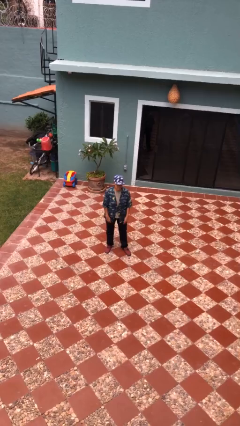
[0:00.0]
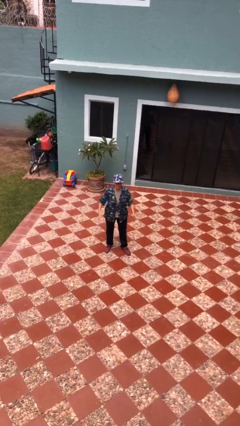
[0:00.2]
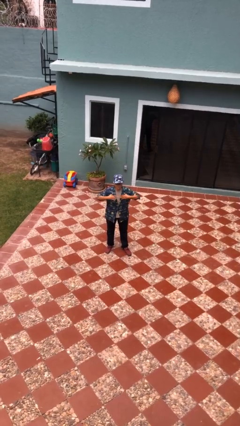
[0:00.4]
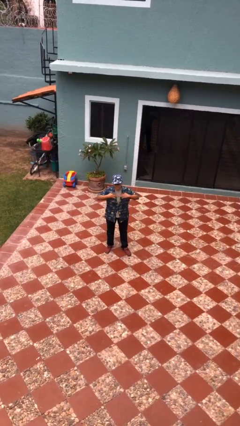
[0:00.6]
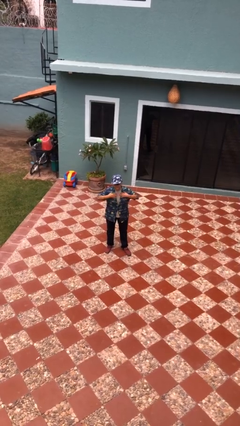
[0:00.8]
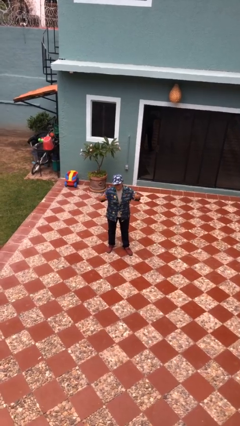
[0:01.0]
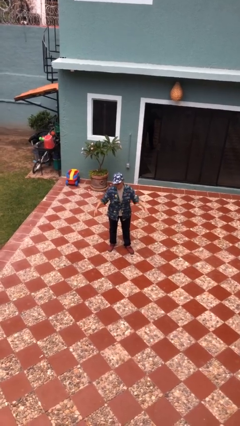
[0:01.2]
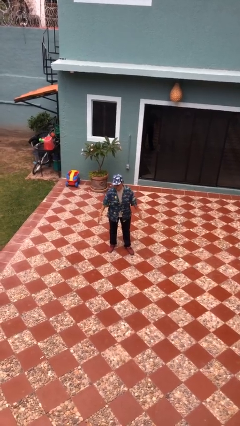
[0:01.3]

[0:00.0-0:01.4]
person drums on chest

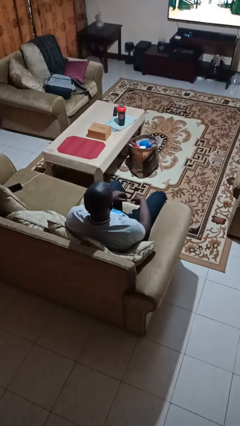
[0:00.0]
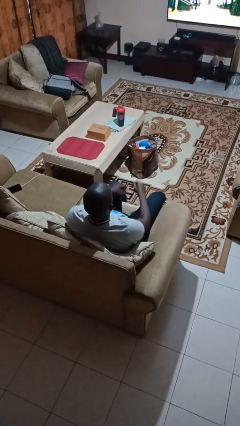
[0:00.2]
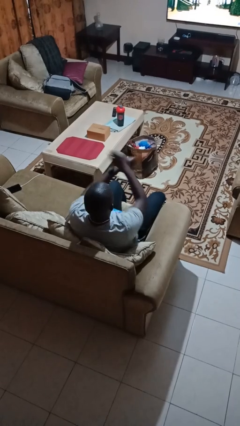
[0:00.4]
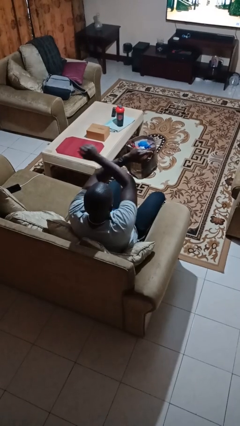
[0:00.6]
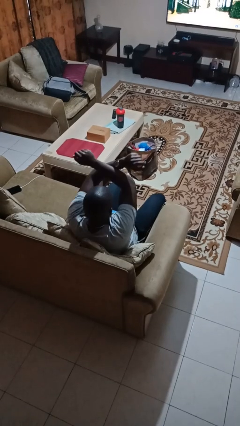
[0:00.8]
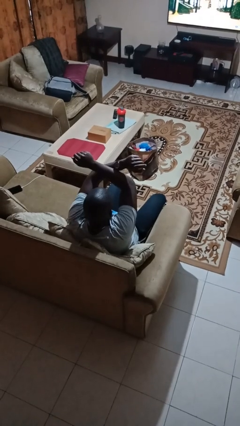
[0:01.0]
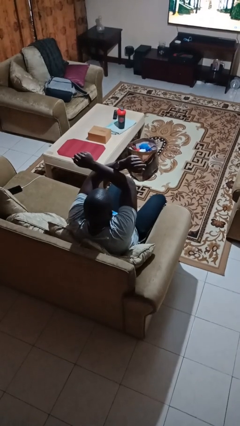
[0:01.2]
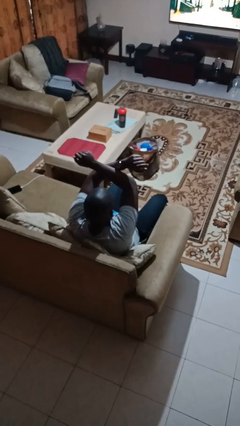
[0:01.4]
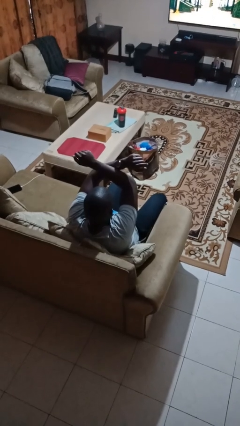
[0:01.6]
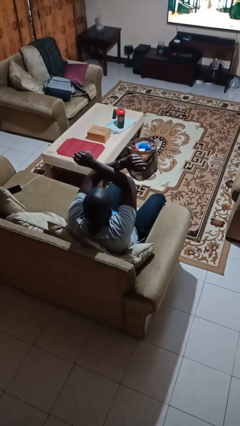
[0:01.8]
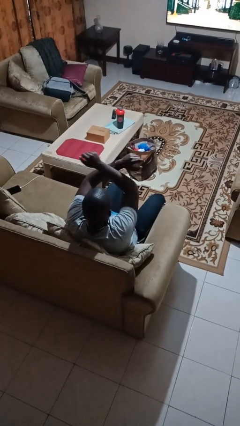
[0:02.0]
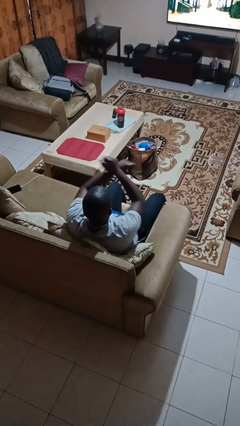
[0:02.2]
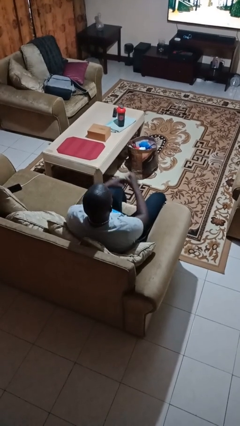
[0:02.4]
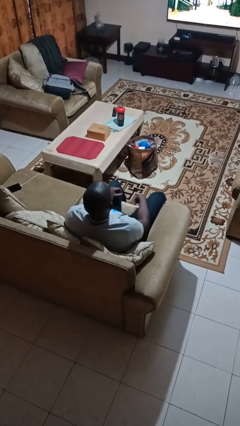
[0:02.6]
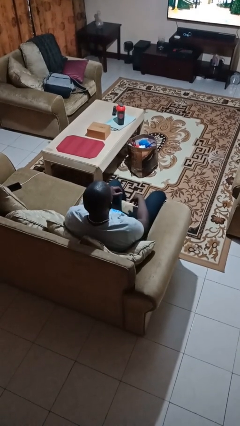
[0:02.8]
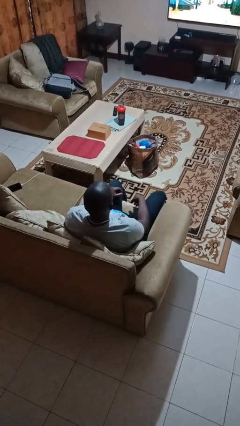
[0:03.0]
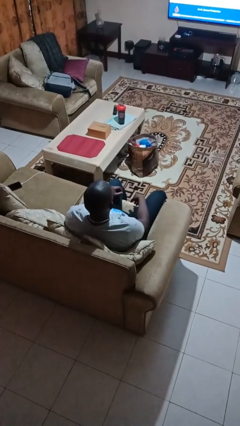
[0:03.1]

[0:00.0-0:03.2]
person gestures arms x

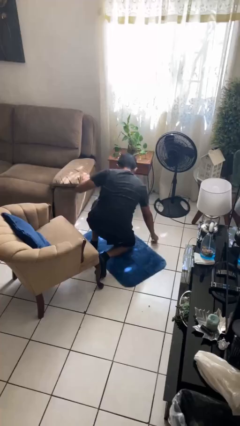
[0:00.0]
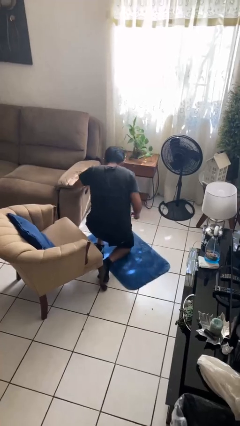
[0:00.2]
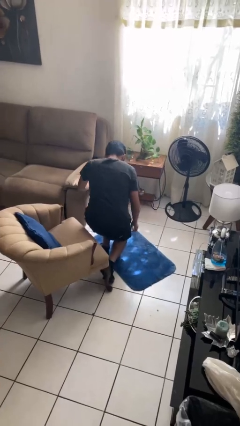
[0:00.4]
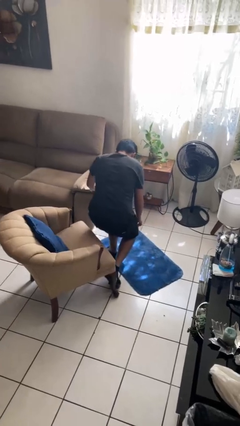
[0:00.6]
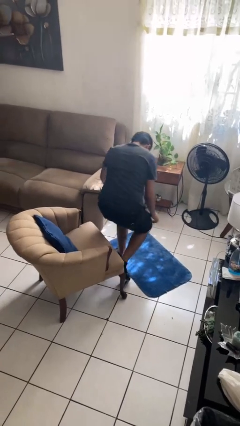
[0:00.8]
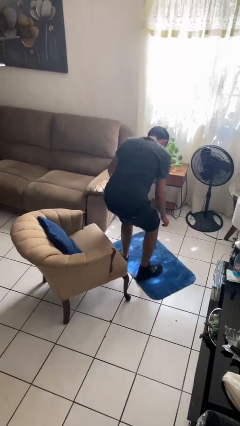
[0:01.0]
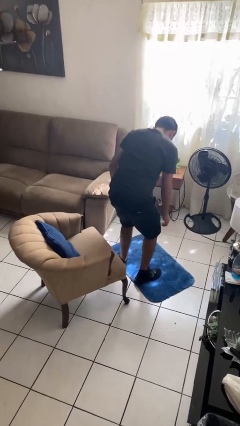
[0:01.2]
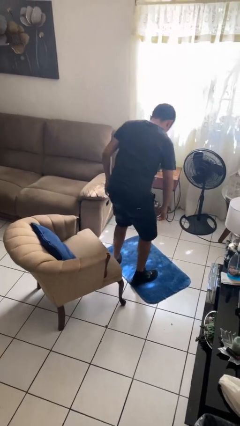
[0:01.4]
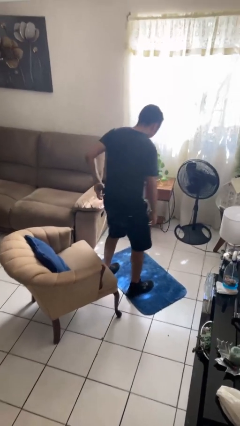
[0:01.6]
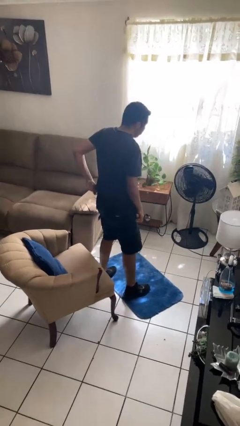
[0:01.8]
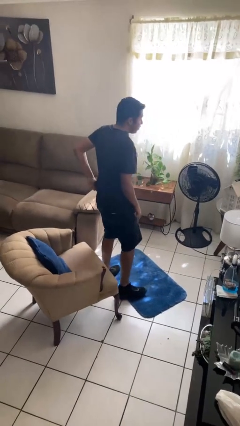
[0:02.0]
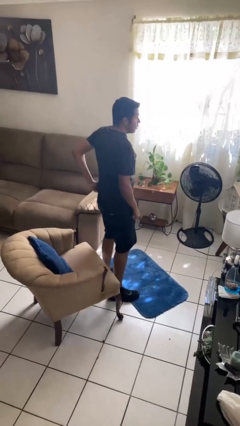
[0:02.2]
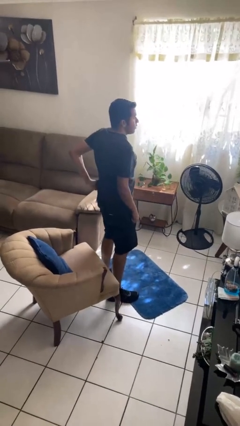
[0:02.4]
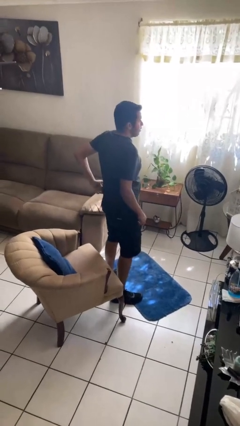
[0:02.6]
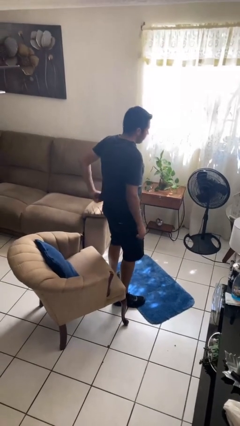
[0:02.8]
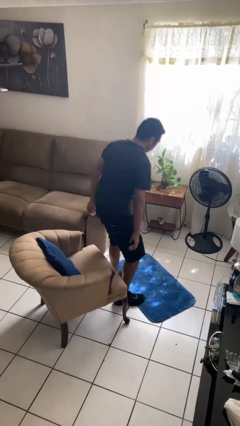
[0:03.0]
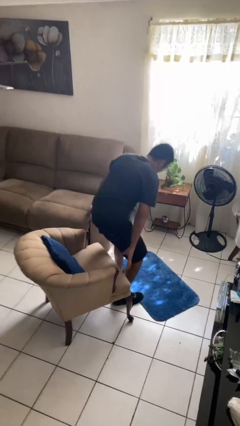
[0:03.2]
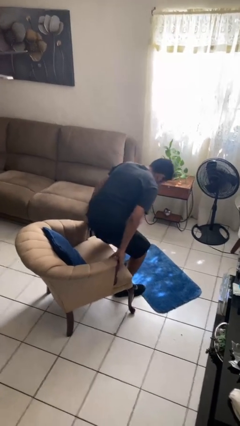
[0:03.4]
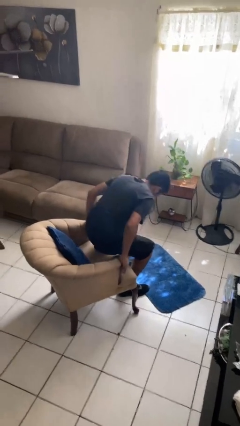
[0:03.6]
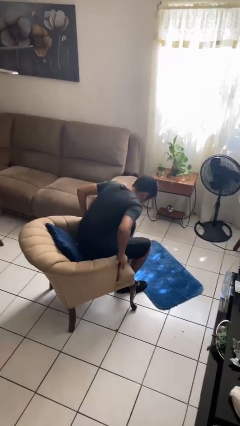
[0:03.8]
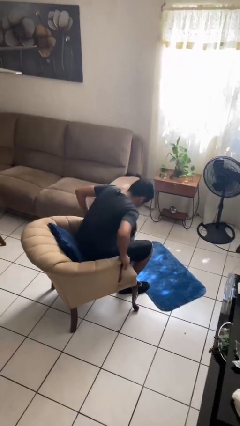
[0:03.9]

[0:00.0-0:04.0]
person stands up from floor

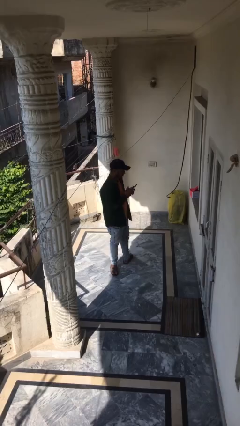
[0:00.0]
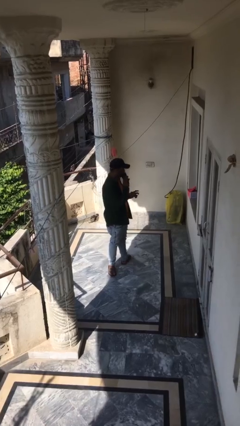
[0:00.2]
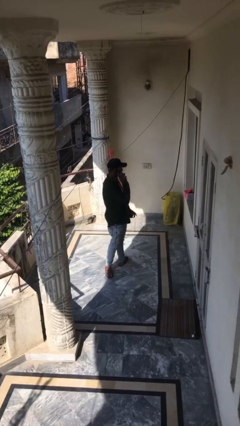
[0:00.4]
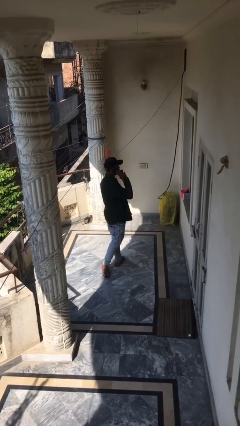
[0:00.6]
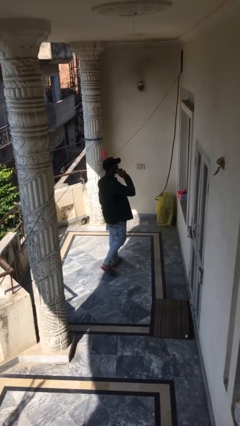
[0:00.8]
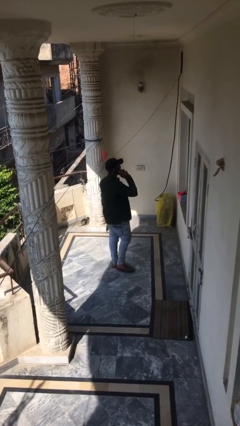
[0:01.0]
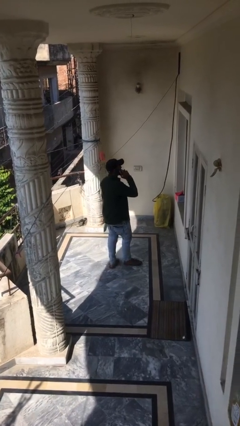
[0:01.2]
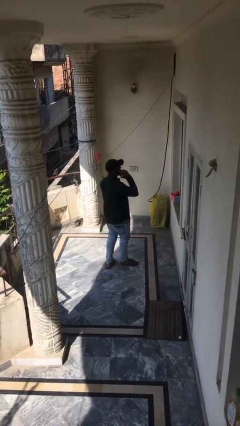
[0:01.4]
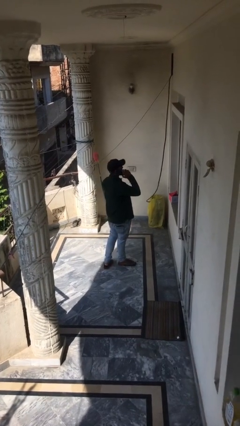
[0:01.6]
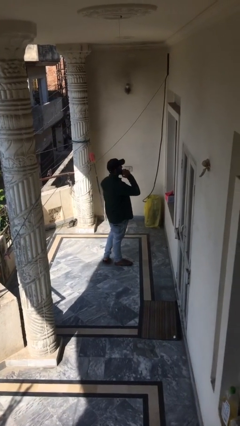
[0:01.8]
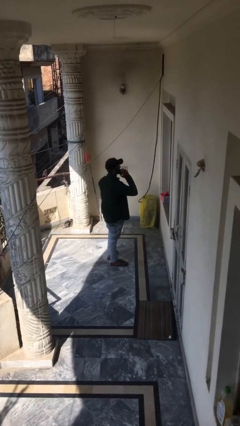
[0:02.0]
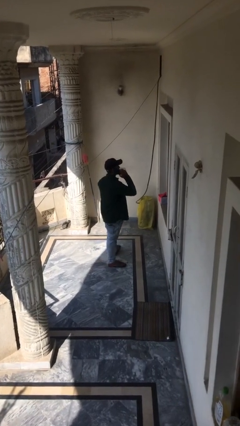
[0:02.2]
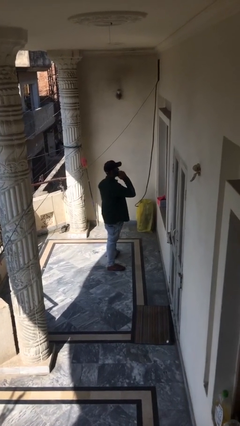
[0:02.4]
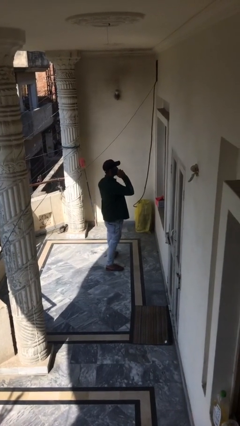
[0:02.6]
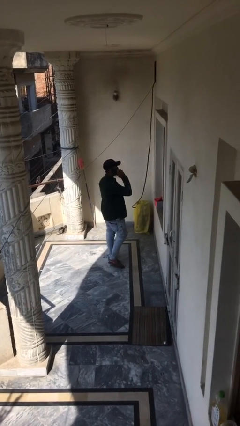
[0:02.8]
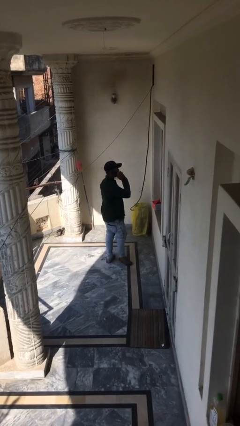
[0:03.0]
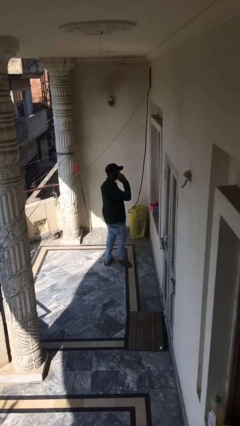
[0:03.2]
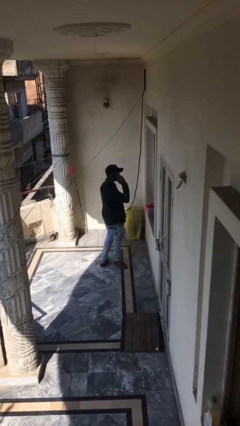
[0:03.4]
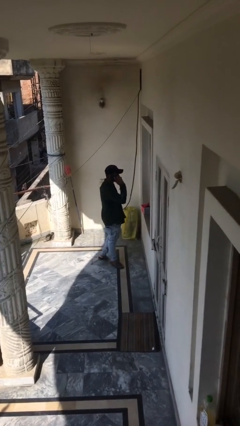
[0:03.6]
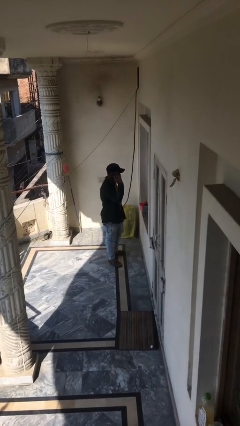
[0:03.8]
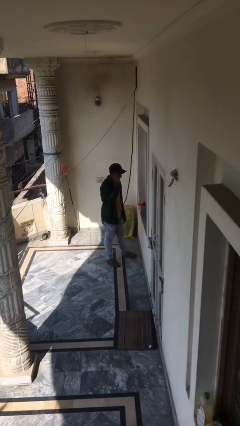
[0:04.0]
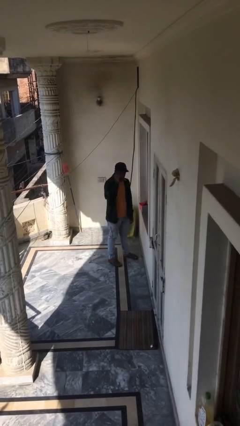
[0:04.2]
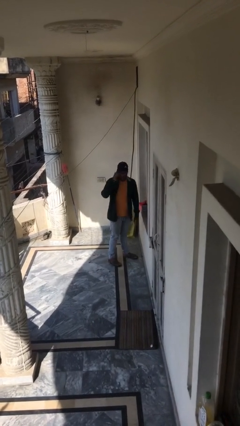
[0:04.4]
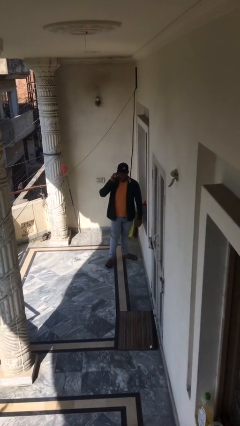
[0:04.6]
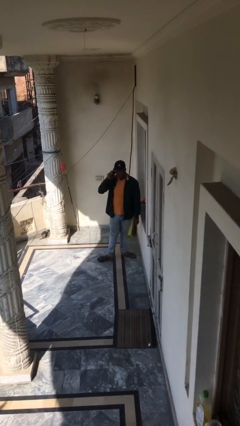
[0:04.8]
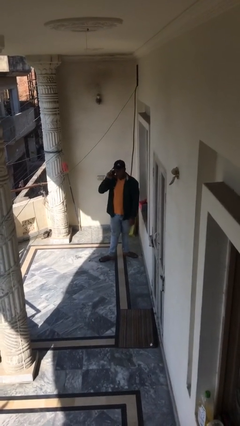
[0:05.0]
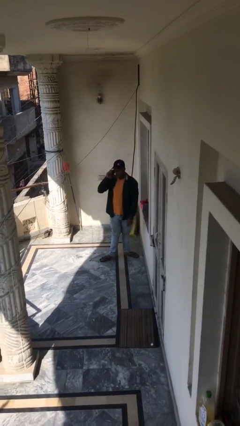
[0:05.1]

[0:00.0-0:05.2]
person talks on phone

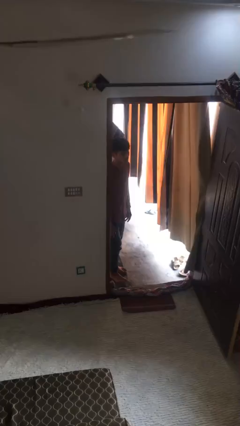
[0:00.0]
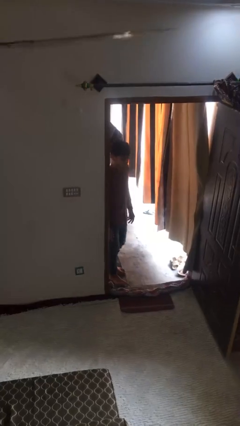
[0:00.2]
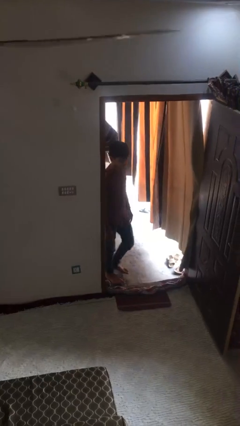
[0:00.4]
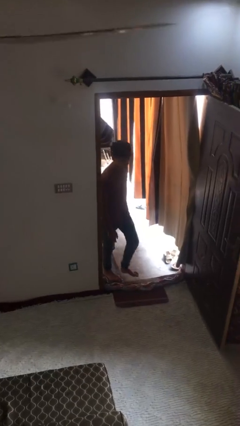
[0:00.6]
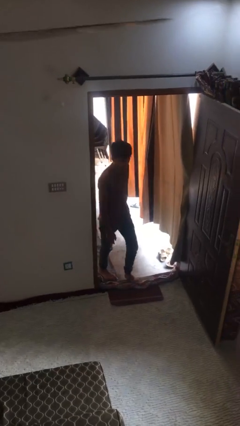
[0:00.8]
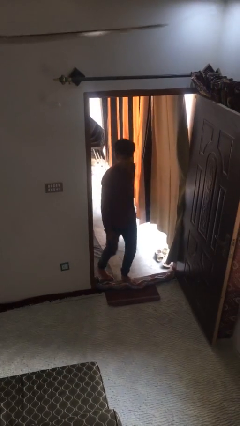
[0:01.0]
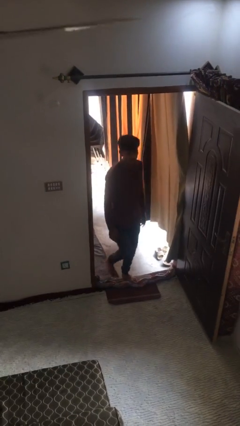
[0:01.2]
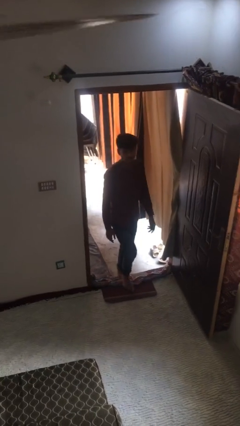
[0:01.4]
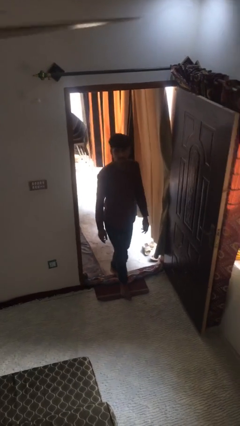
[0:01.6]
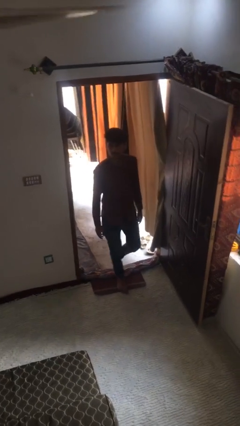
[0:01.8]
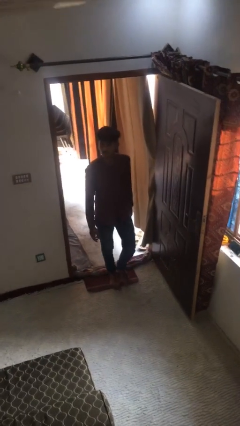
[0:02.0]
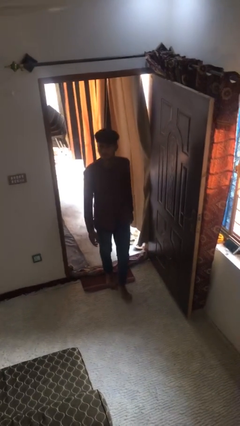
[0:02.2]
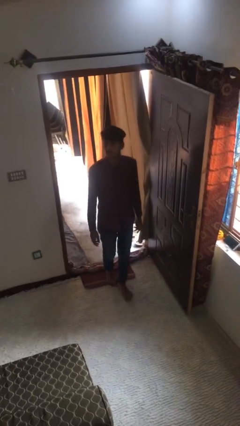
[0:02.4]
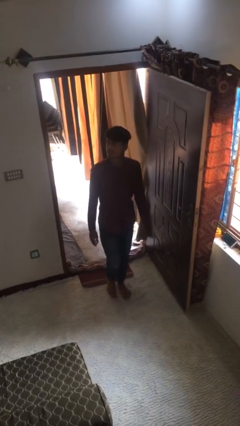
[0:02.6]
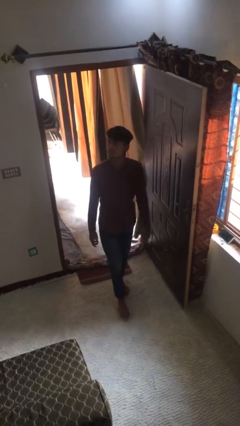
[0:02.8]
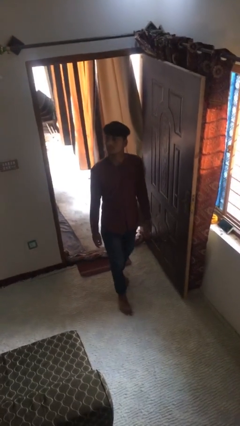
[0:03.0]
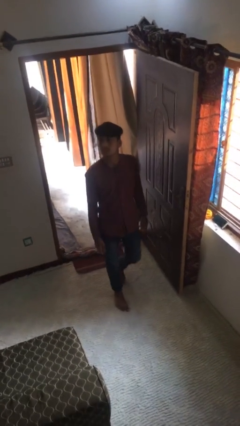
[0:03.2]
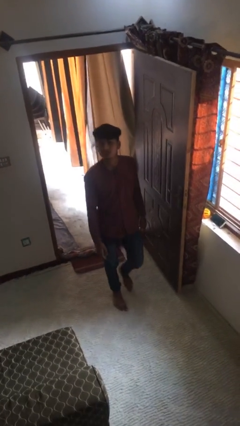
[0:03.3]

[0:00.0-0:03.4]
person enters scene through structure
